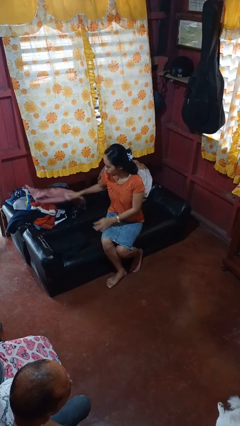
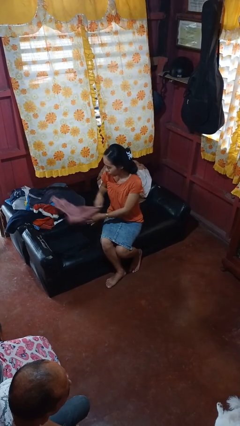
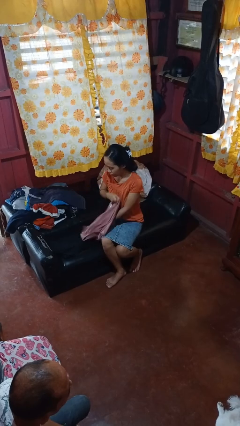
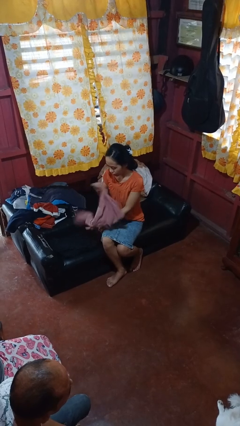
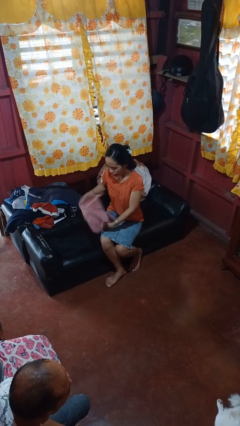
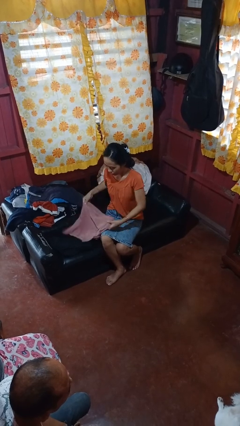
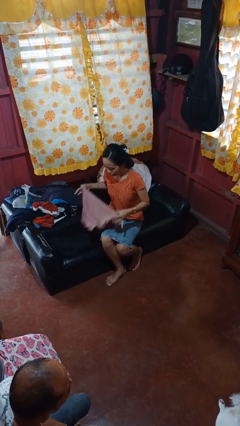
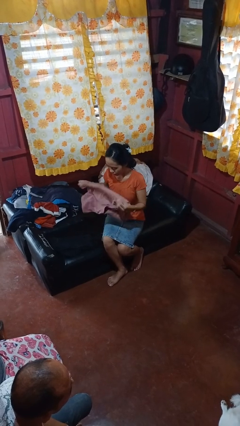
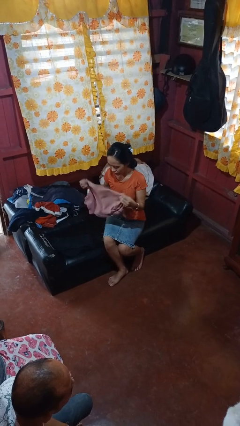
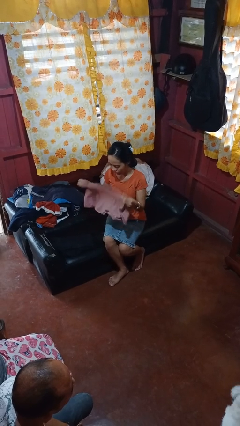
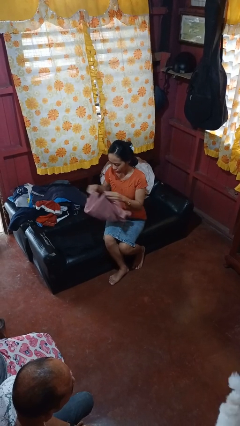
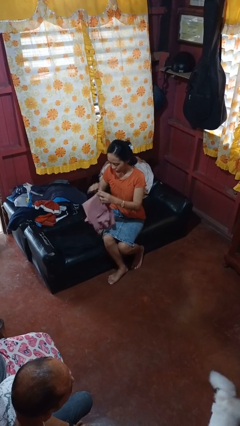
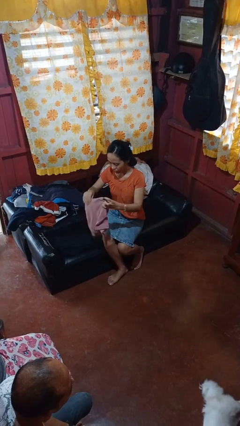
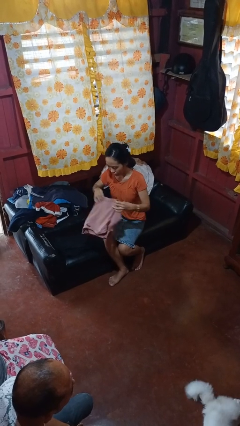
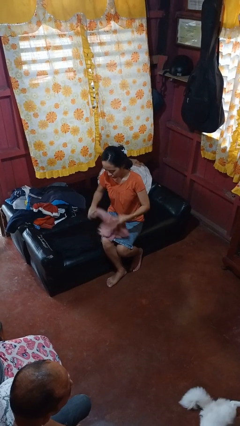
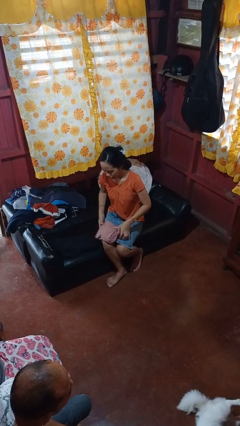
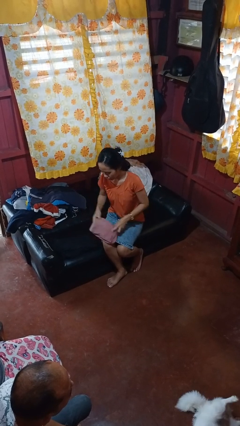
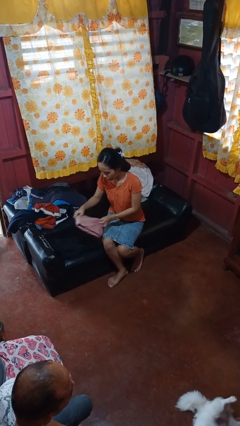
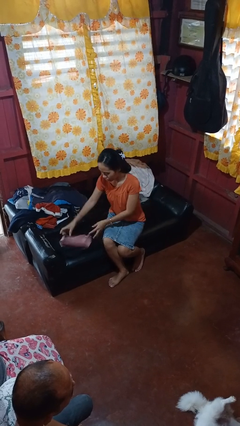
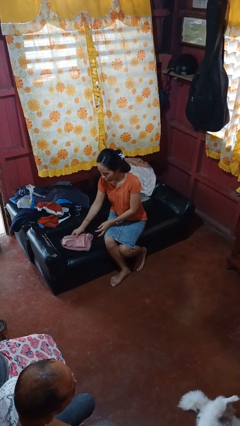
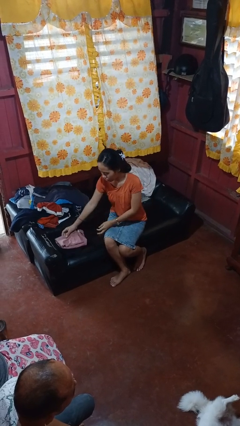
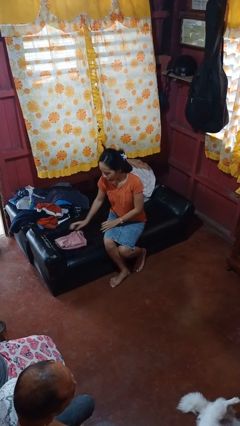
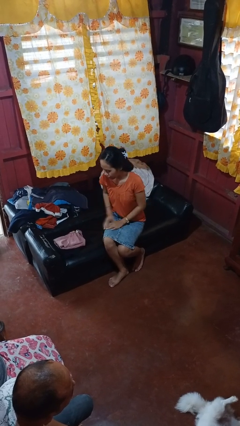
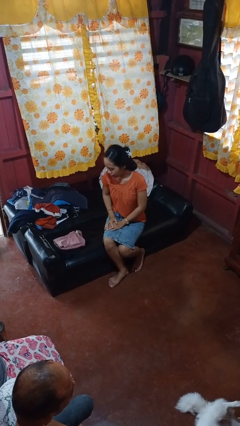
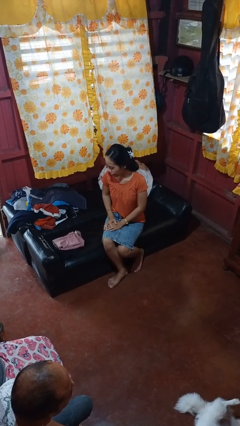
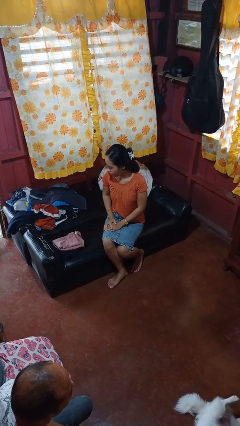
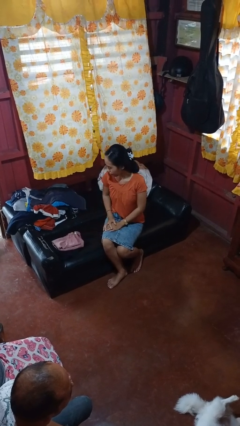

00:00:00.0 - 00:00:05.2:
person folds shirt

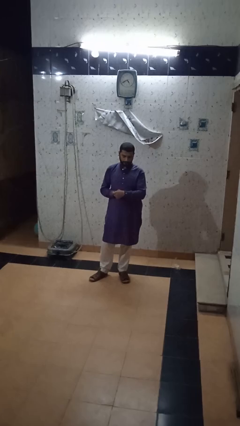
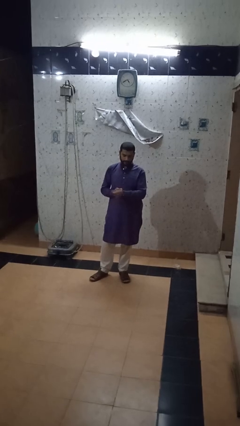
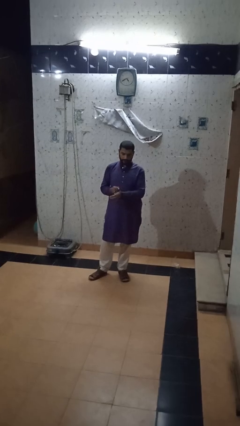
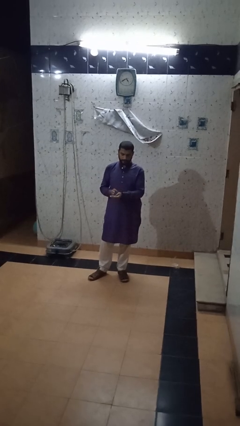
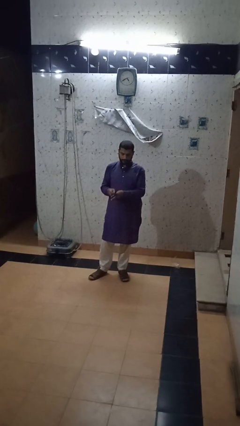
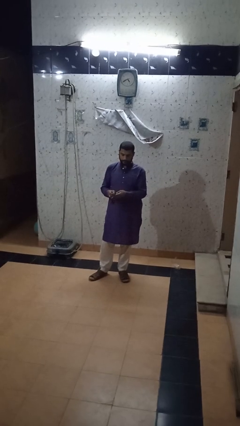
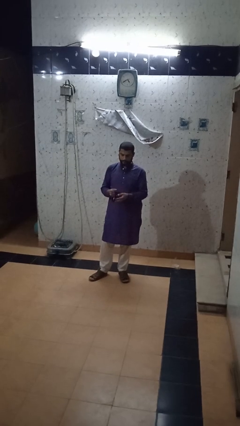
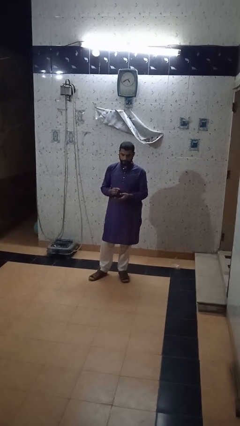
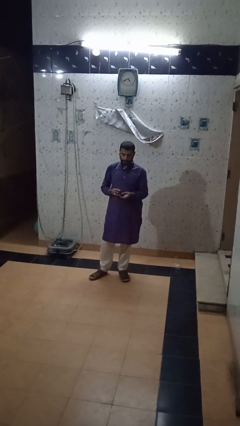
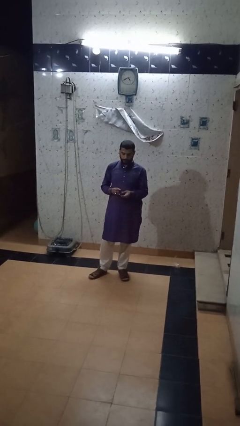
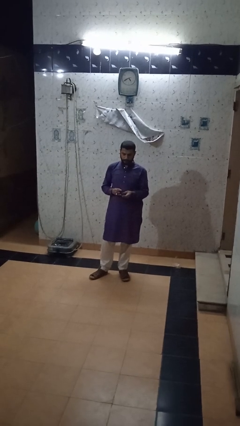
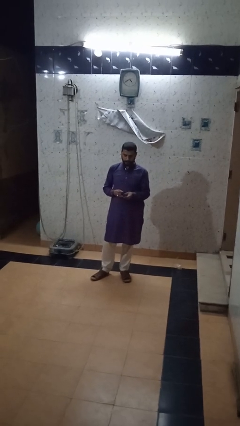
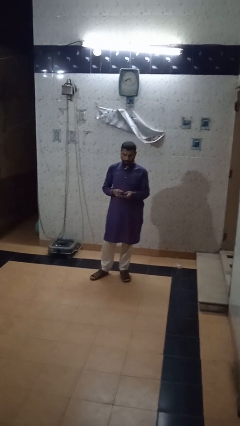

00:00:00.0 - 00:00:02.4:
person takes off wristwatch

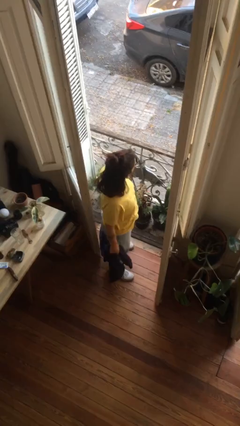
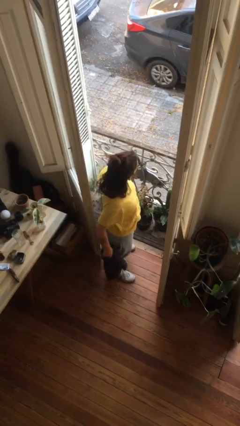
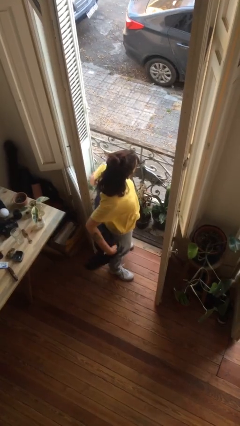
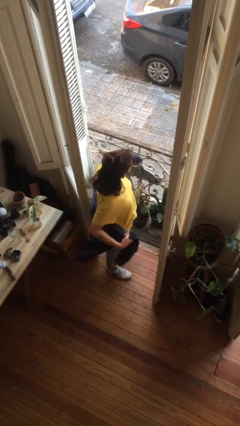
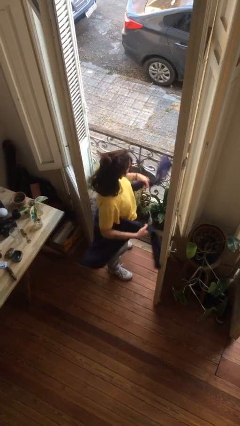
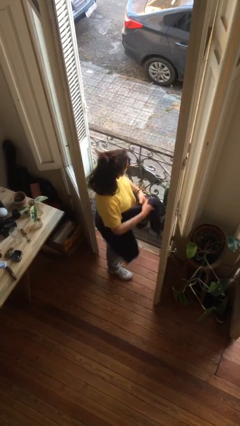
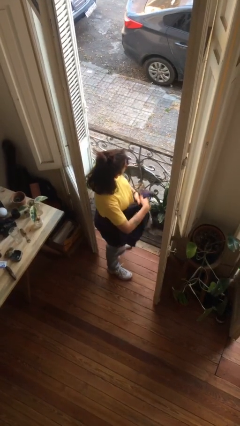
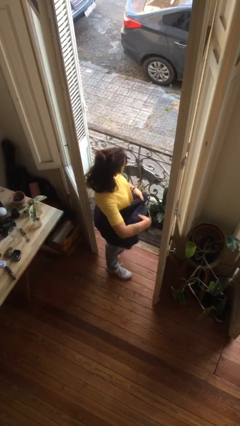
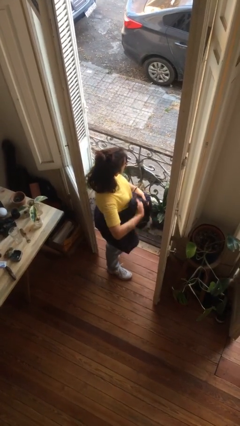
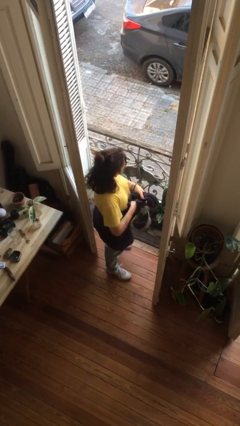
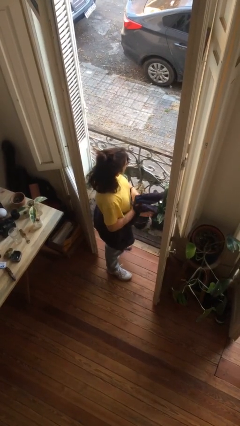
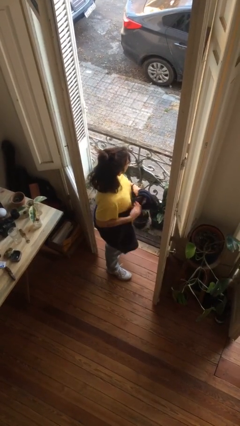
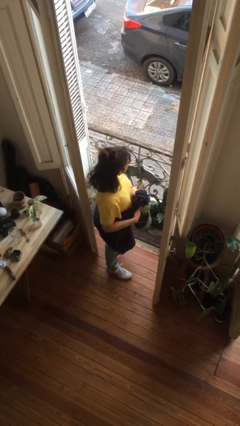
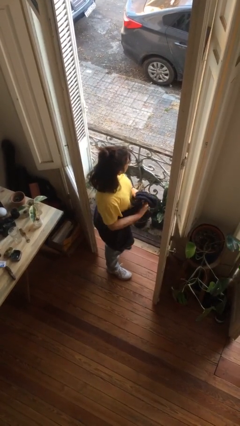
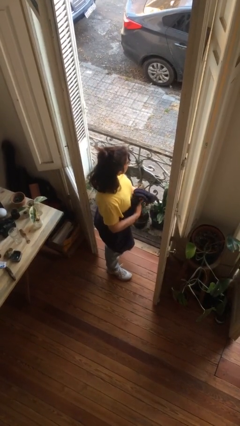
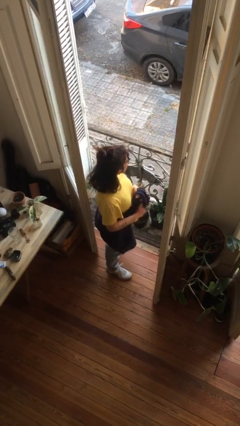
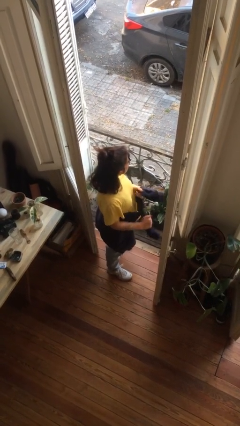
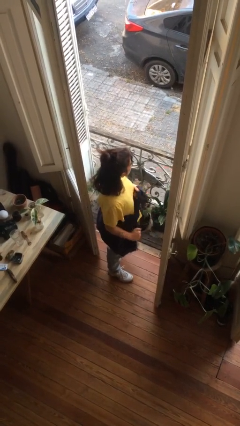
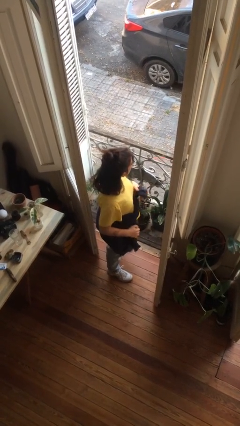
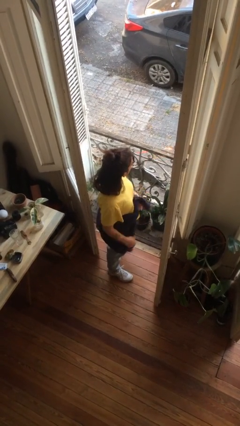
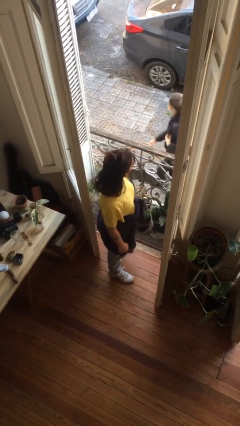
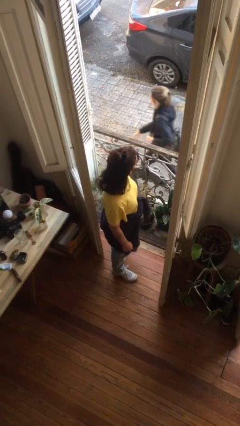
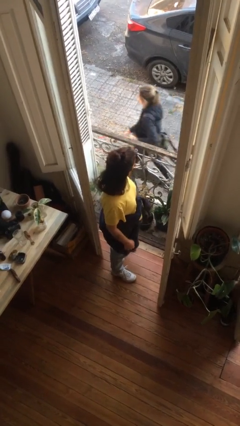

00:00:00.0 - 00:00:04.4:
person ties jacket around waist

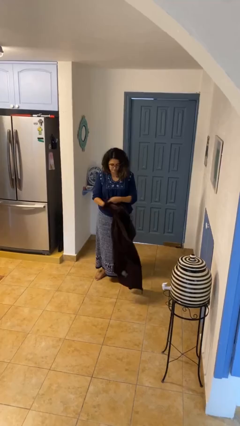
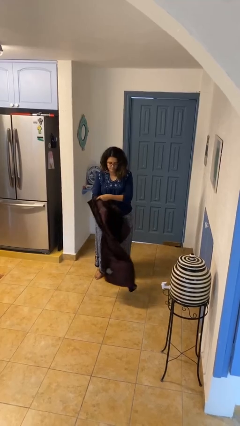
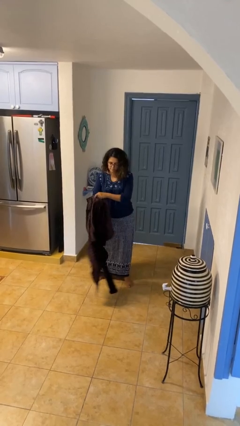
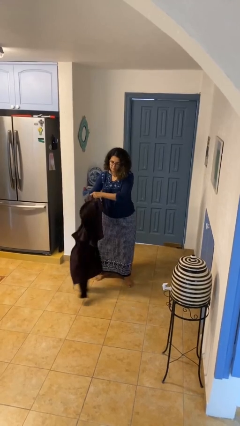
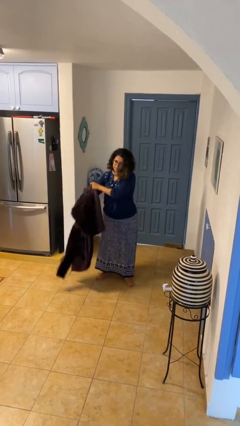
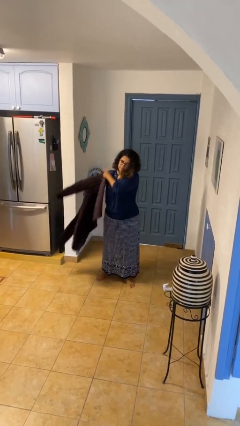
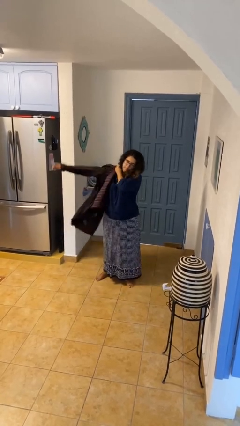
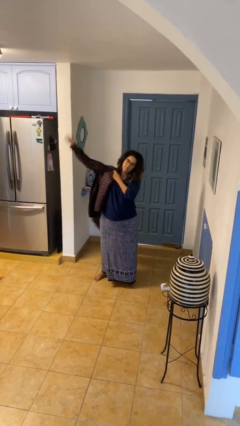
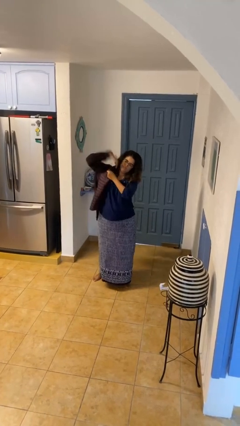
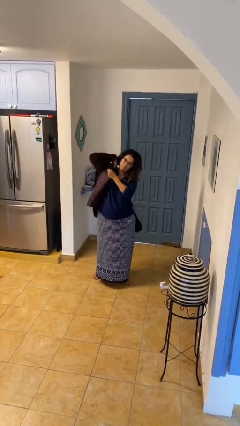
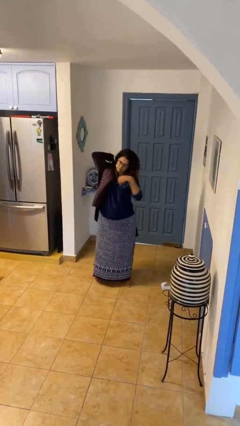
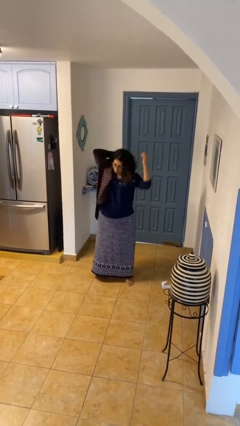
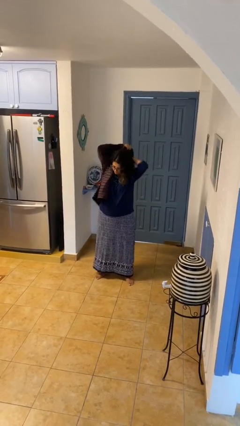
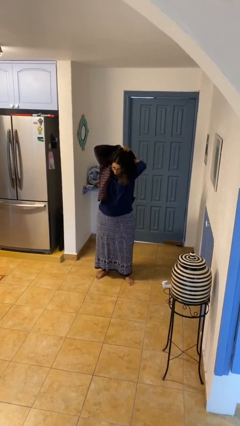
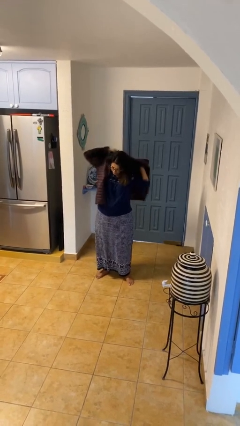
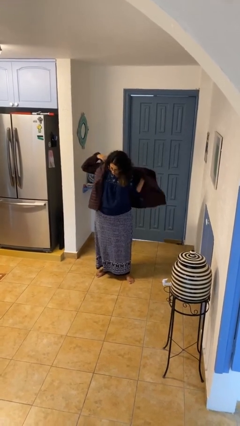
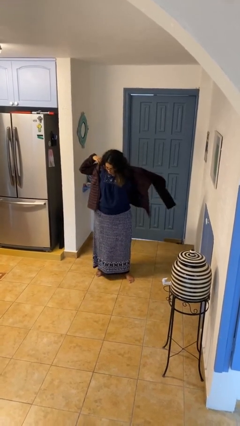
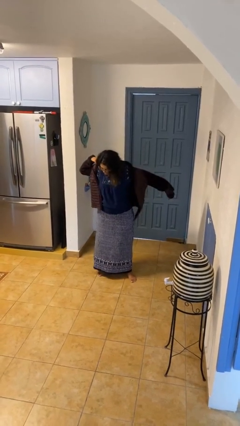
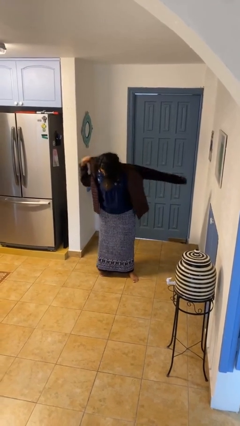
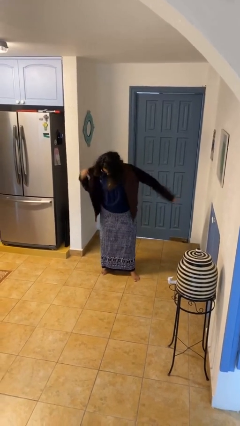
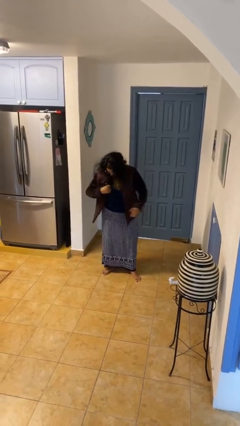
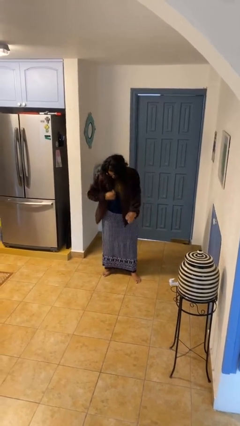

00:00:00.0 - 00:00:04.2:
person puts on jacket

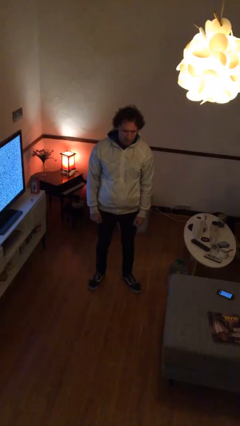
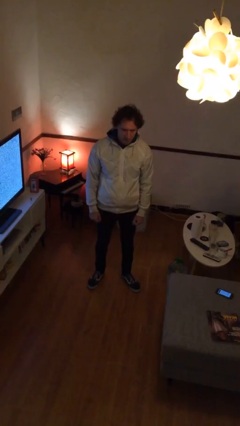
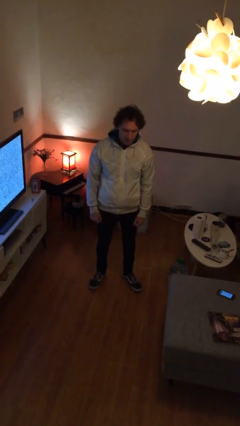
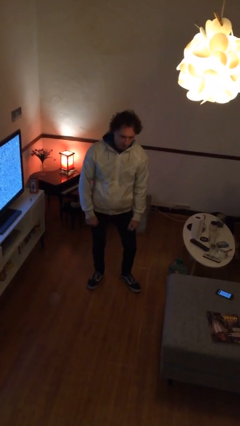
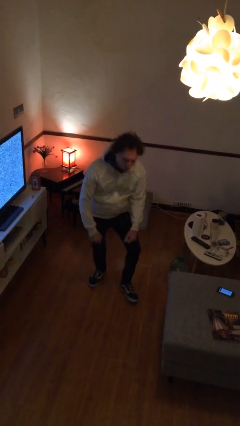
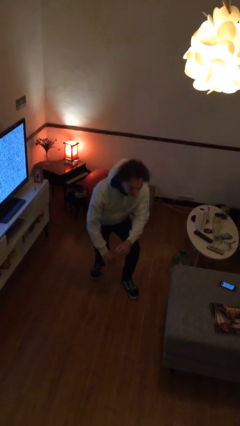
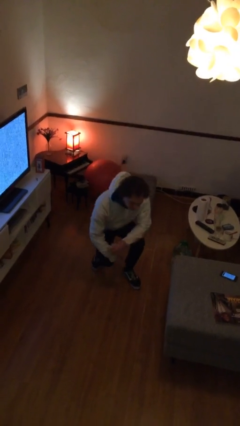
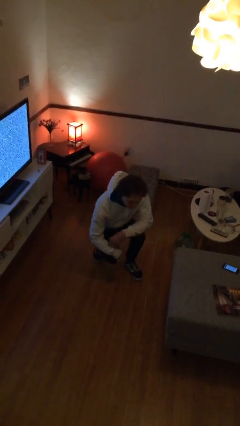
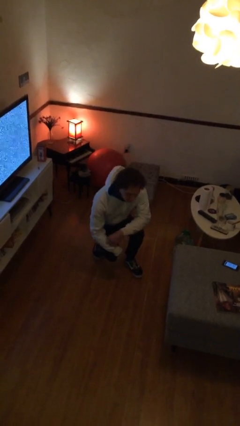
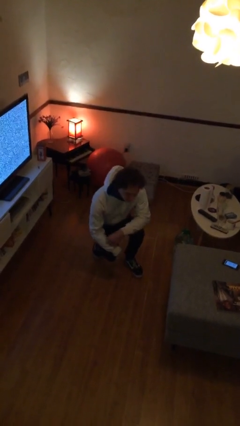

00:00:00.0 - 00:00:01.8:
person squats
